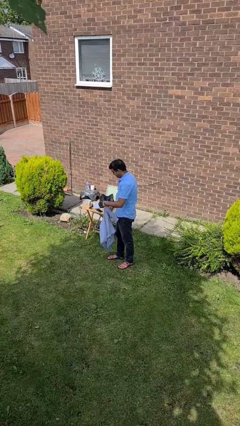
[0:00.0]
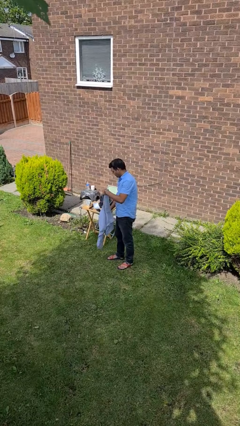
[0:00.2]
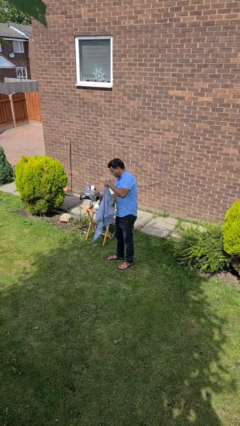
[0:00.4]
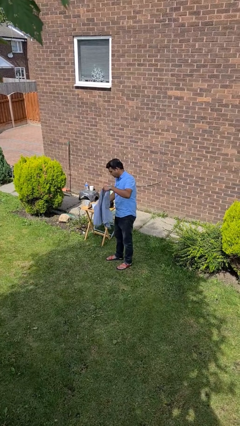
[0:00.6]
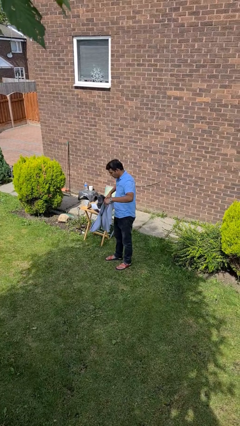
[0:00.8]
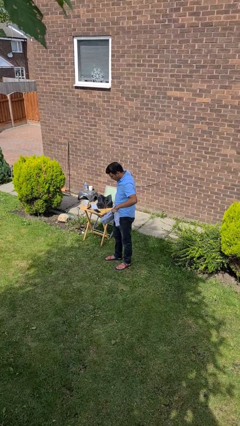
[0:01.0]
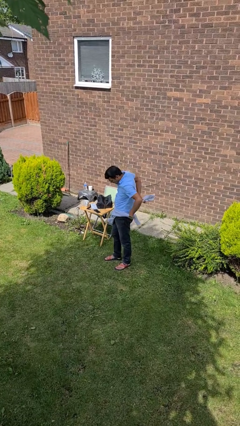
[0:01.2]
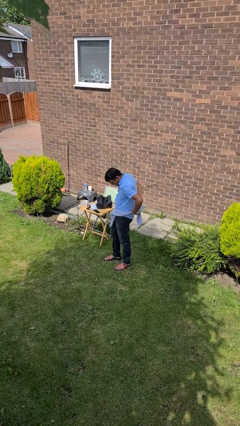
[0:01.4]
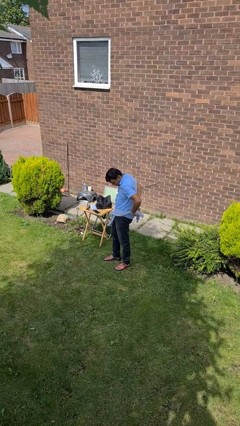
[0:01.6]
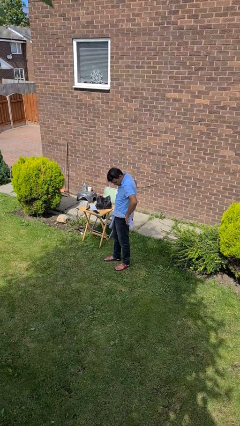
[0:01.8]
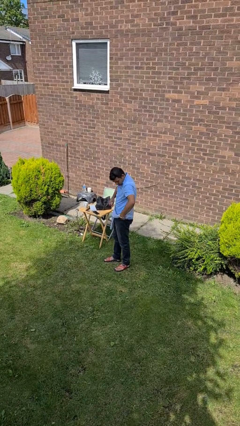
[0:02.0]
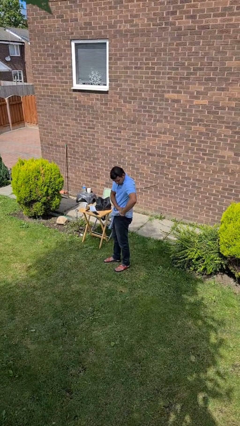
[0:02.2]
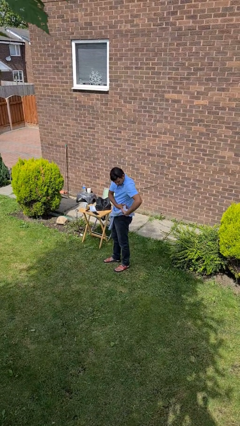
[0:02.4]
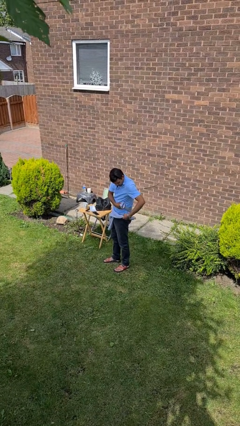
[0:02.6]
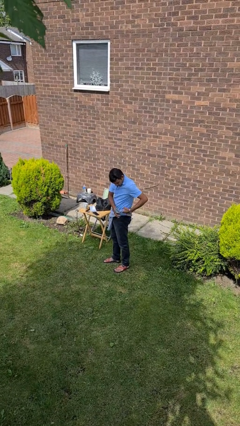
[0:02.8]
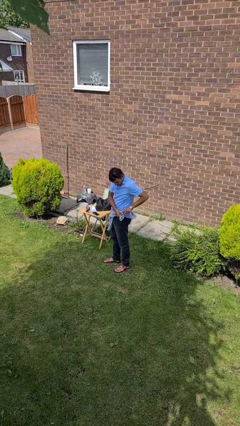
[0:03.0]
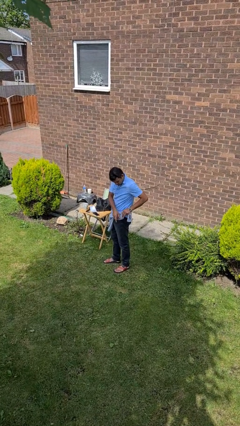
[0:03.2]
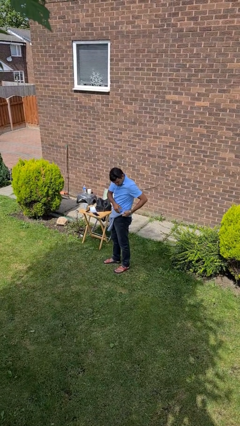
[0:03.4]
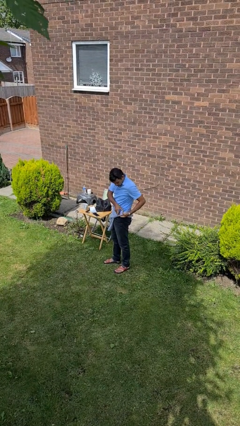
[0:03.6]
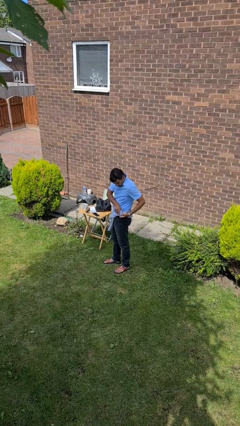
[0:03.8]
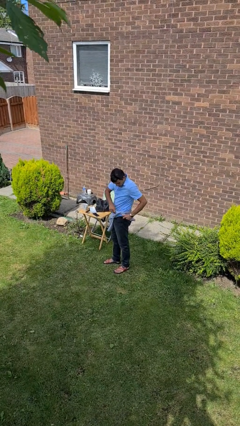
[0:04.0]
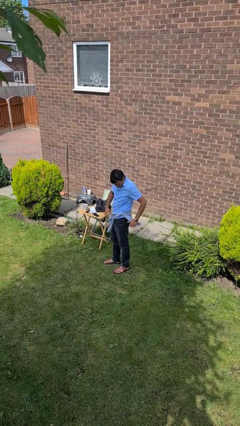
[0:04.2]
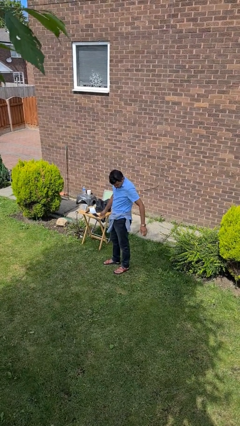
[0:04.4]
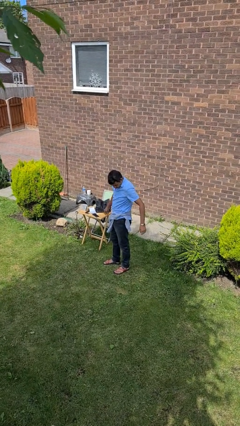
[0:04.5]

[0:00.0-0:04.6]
person ties jacket around waist

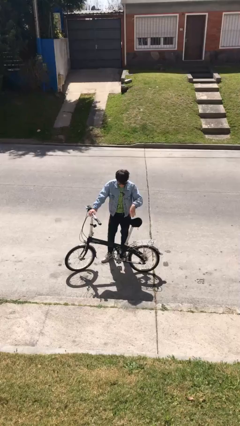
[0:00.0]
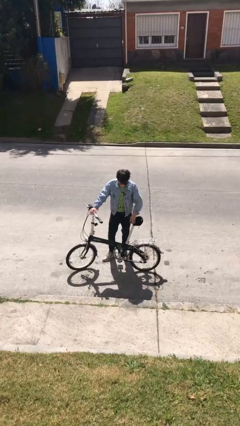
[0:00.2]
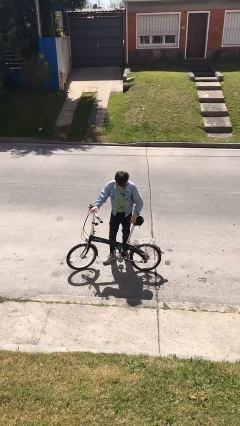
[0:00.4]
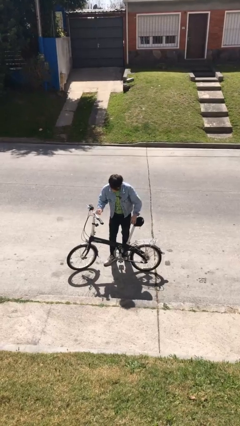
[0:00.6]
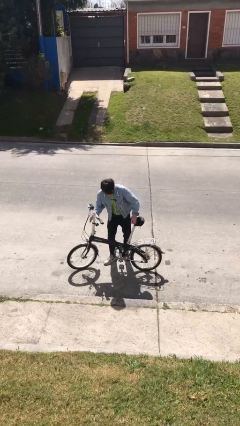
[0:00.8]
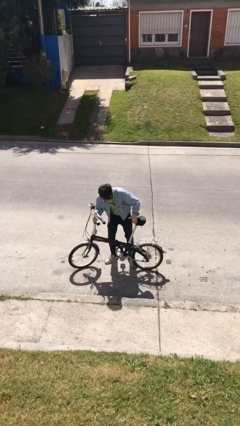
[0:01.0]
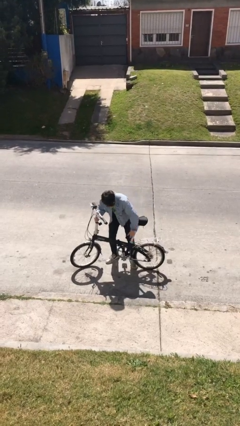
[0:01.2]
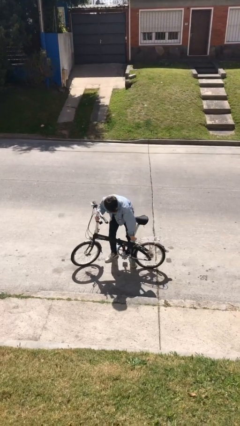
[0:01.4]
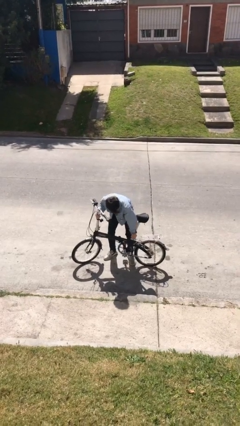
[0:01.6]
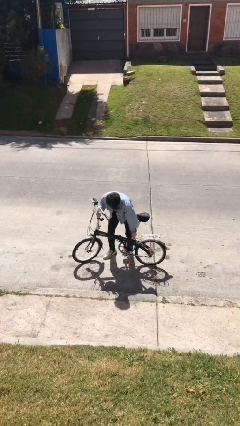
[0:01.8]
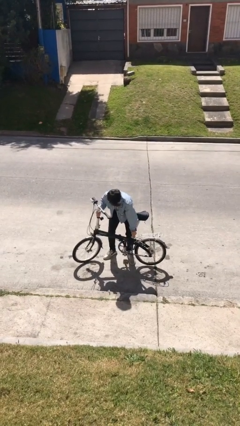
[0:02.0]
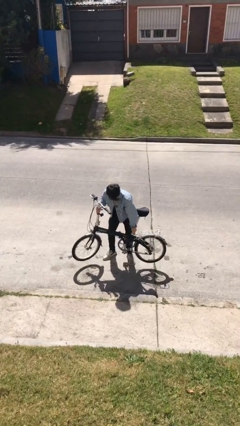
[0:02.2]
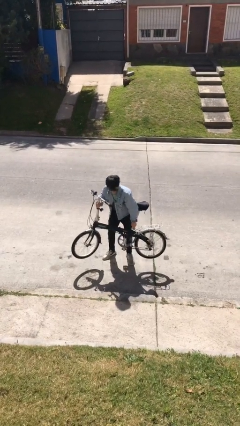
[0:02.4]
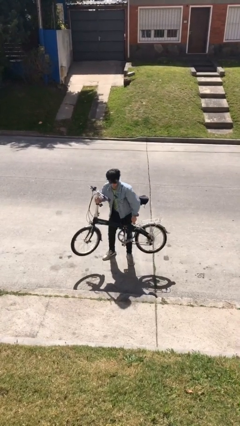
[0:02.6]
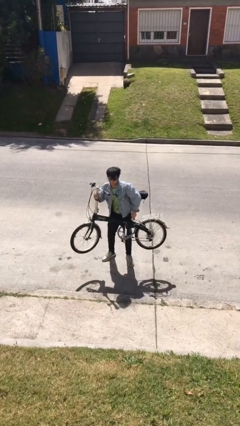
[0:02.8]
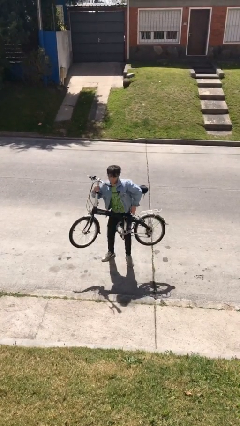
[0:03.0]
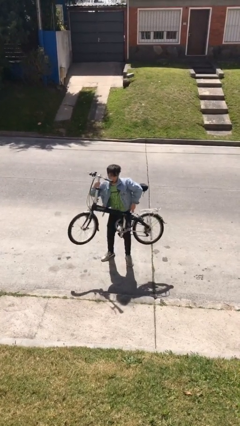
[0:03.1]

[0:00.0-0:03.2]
person picks up object from floor

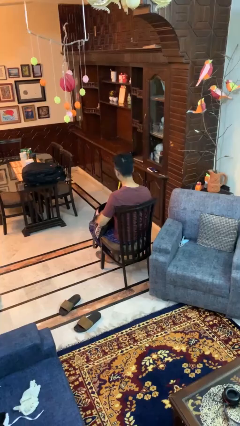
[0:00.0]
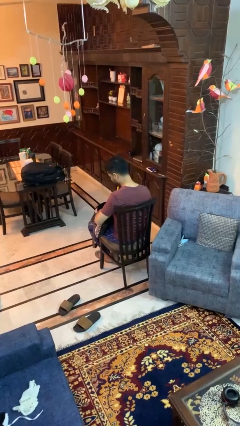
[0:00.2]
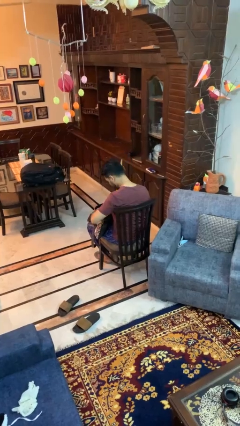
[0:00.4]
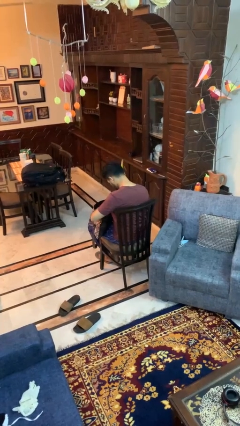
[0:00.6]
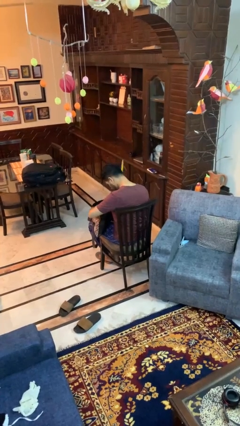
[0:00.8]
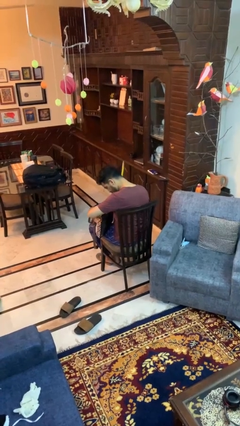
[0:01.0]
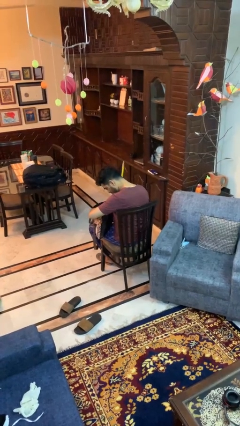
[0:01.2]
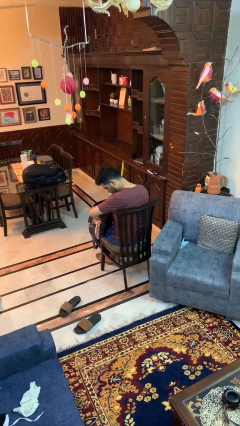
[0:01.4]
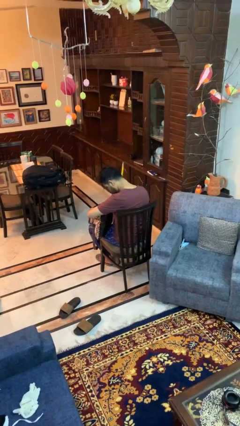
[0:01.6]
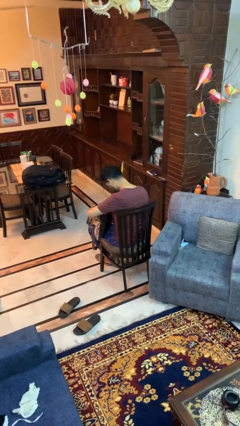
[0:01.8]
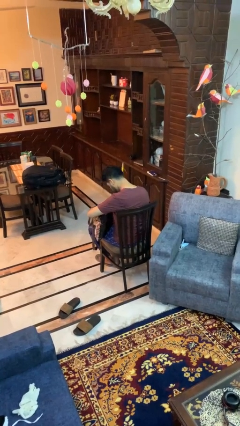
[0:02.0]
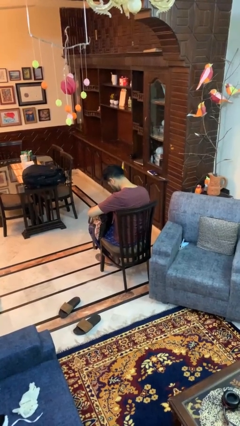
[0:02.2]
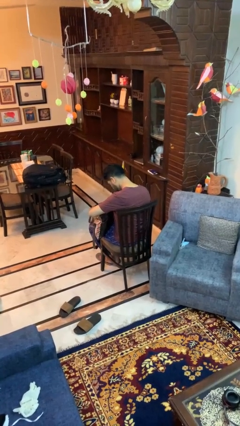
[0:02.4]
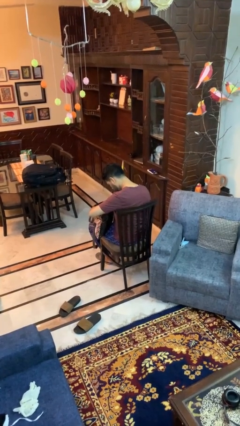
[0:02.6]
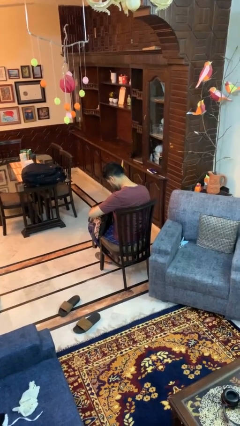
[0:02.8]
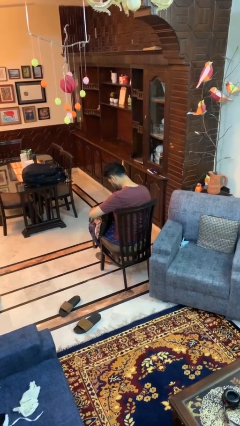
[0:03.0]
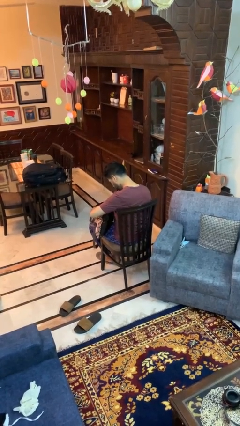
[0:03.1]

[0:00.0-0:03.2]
person searches in purse

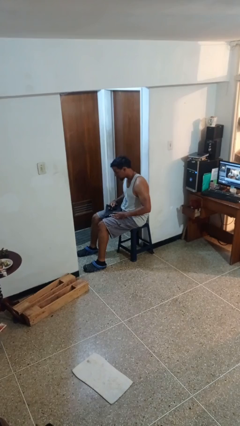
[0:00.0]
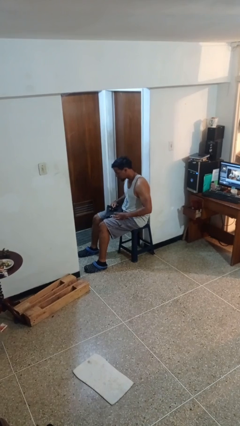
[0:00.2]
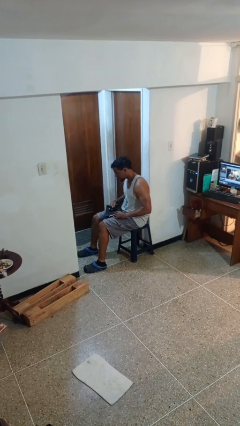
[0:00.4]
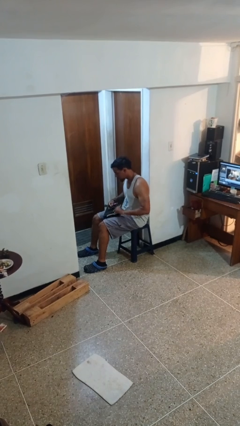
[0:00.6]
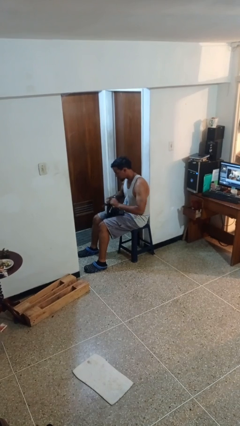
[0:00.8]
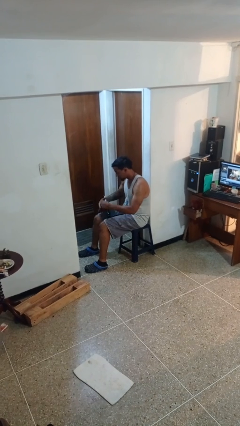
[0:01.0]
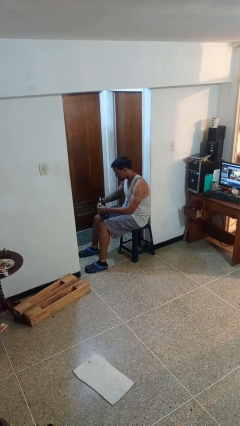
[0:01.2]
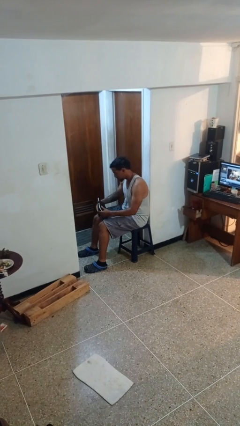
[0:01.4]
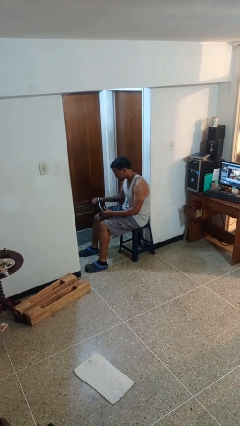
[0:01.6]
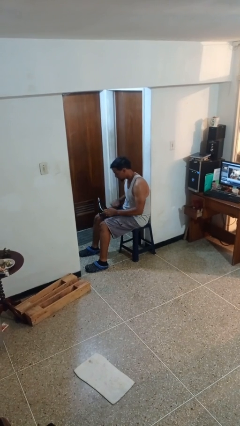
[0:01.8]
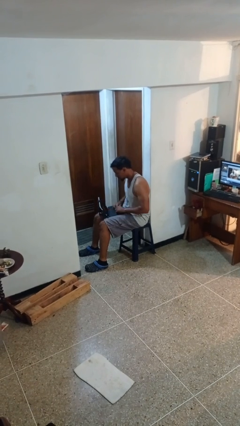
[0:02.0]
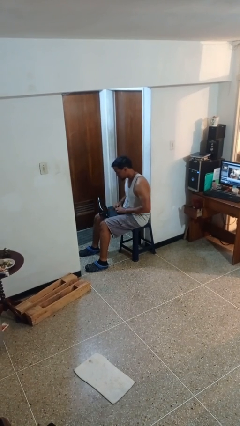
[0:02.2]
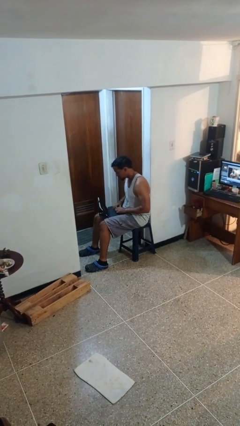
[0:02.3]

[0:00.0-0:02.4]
person opens laptop

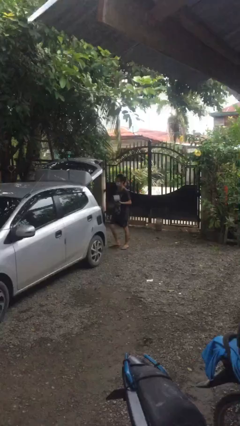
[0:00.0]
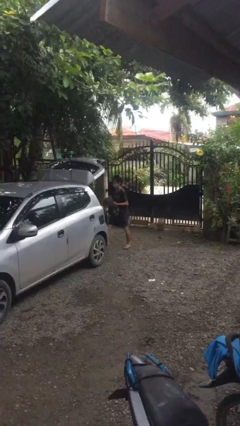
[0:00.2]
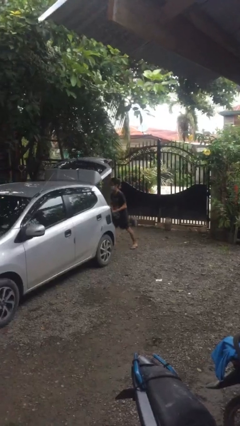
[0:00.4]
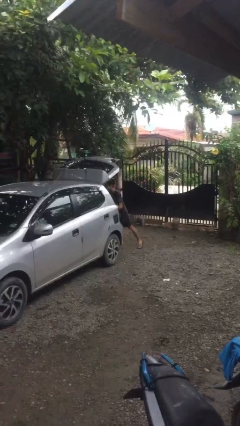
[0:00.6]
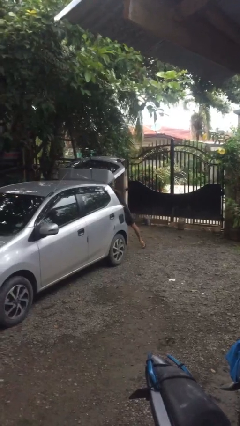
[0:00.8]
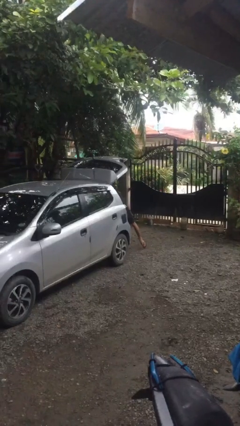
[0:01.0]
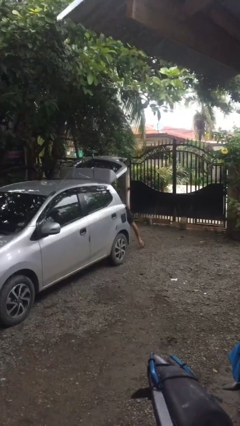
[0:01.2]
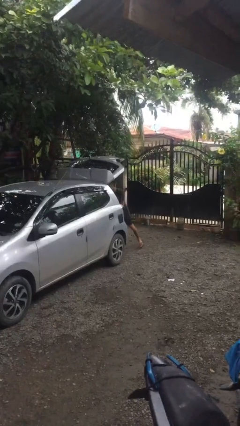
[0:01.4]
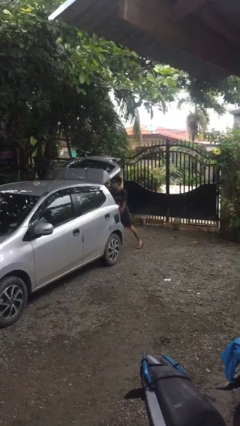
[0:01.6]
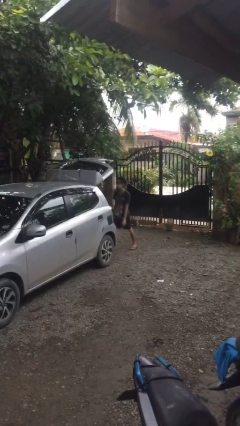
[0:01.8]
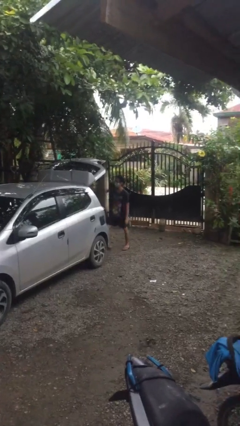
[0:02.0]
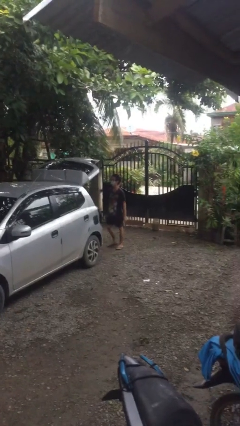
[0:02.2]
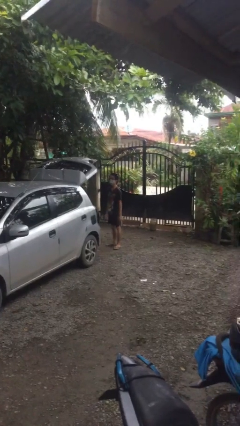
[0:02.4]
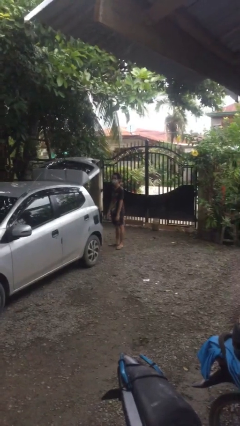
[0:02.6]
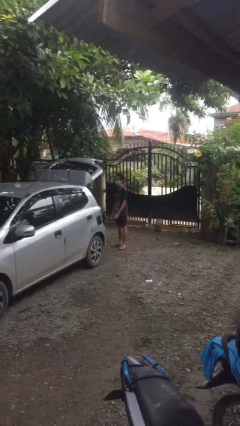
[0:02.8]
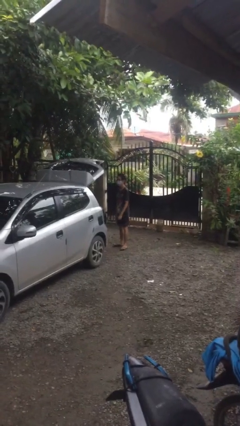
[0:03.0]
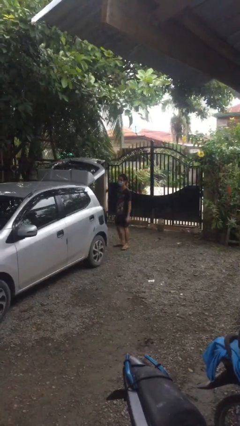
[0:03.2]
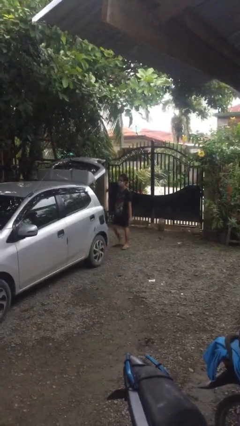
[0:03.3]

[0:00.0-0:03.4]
person loads car

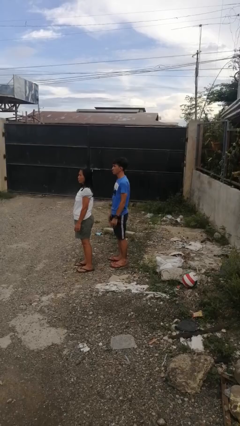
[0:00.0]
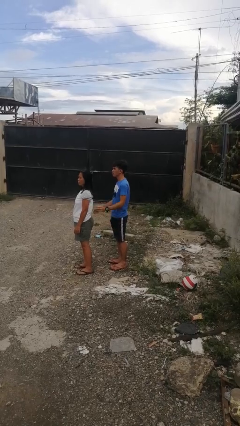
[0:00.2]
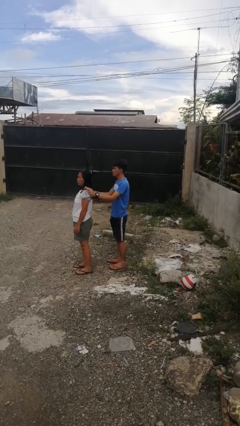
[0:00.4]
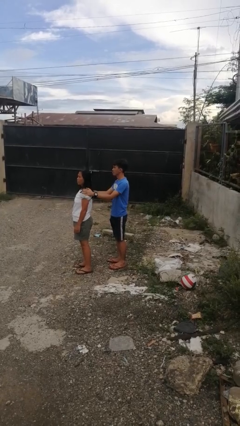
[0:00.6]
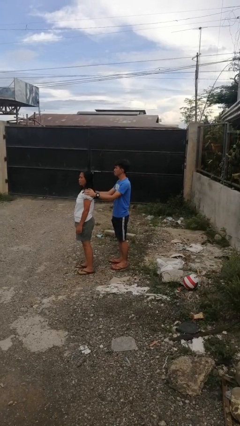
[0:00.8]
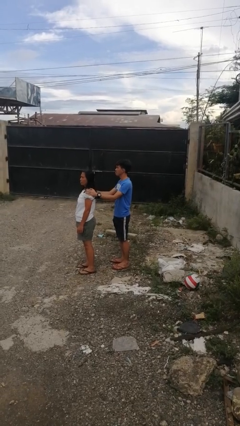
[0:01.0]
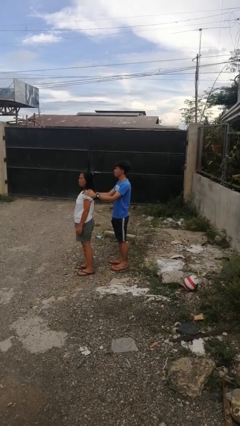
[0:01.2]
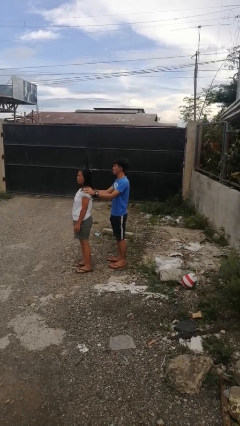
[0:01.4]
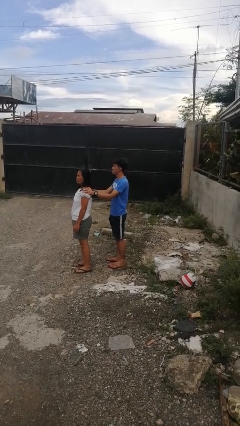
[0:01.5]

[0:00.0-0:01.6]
person grabs person by shoulder
